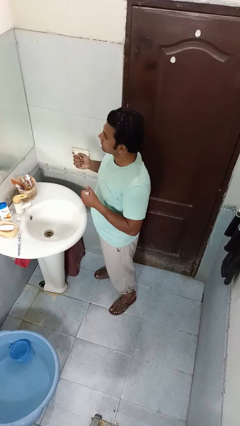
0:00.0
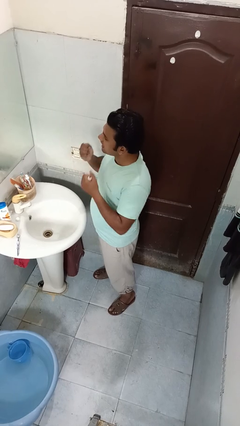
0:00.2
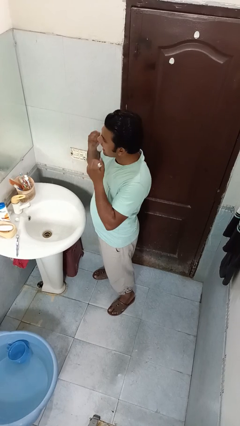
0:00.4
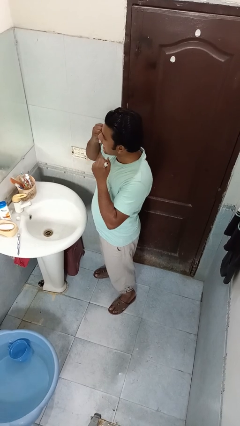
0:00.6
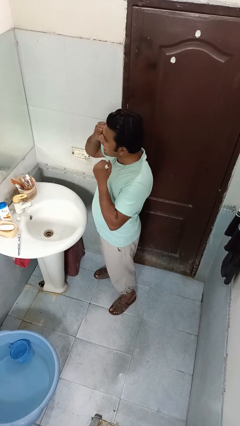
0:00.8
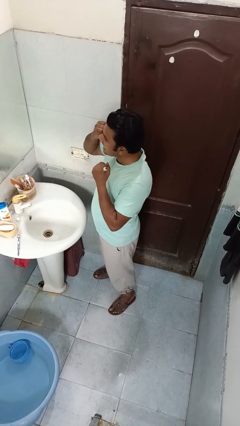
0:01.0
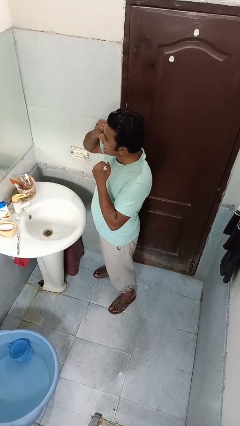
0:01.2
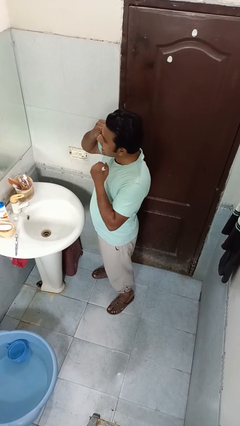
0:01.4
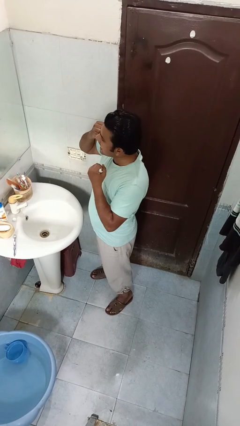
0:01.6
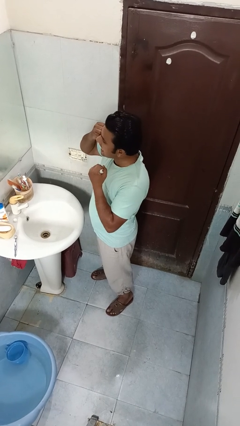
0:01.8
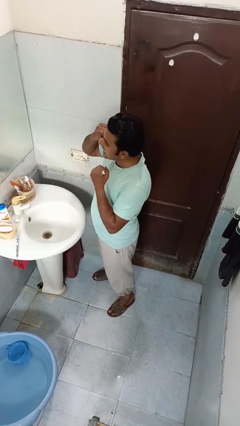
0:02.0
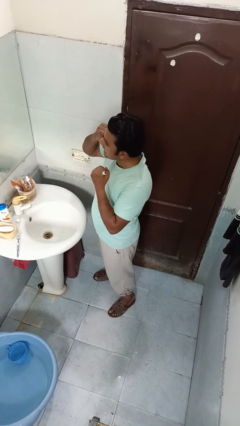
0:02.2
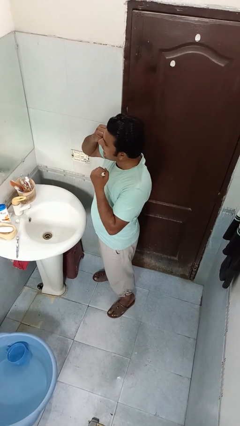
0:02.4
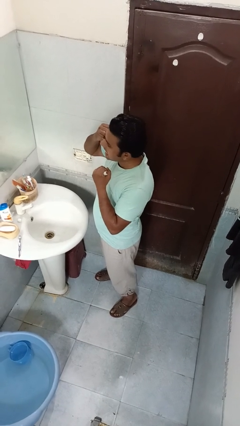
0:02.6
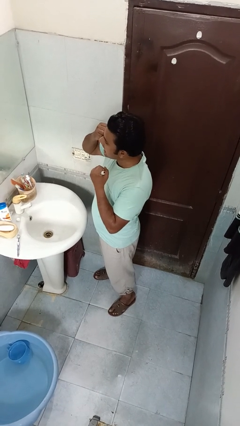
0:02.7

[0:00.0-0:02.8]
person flosses

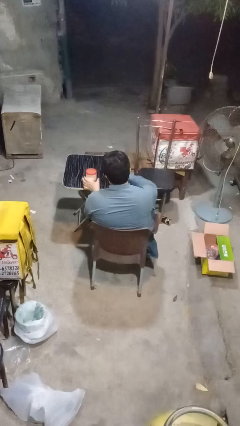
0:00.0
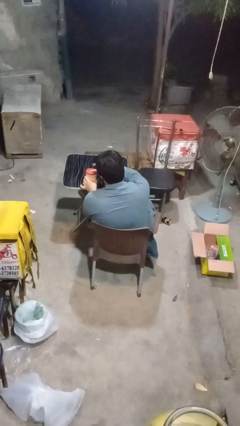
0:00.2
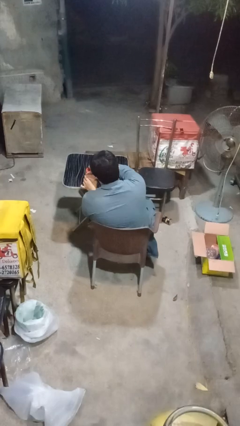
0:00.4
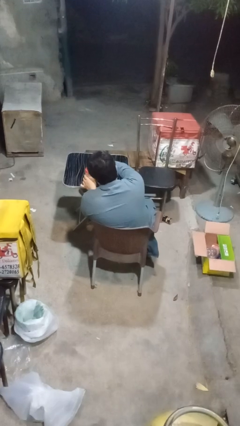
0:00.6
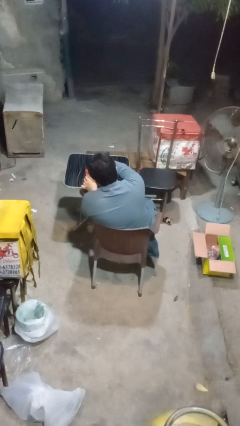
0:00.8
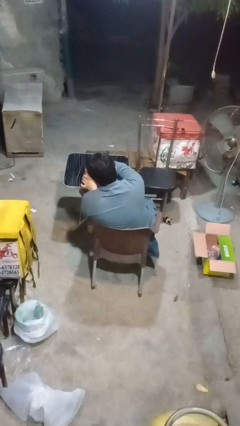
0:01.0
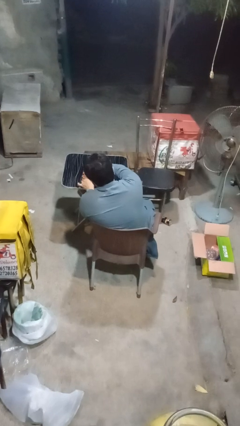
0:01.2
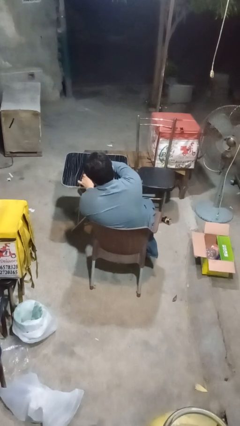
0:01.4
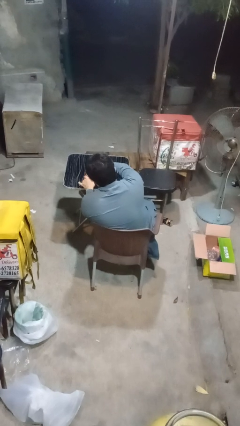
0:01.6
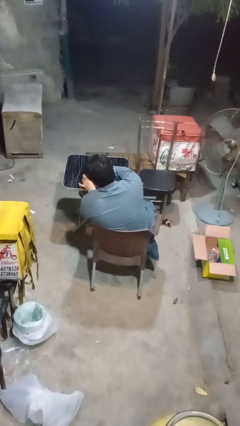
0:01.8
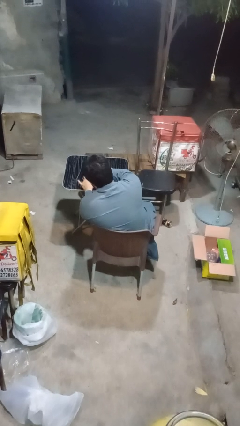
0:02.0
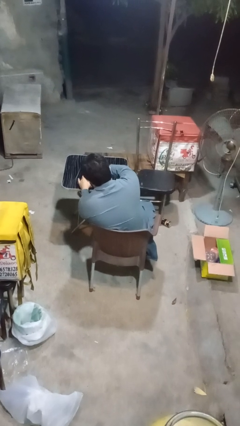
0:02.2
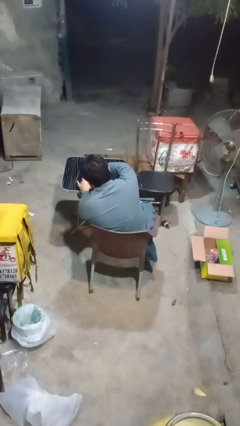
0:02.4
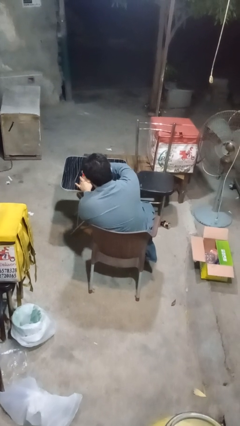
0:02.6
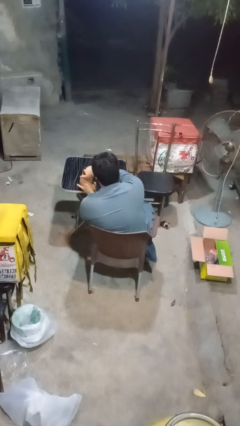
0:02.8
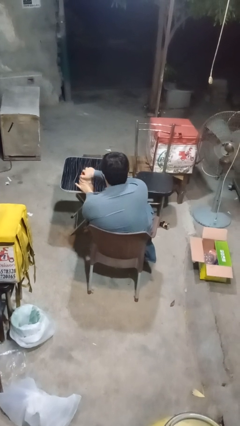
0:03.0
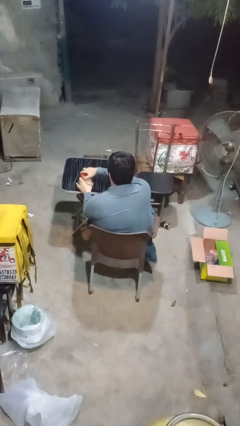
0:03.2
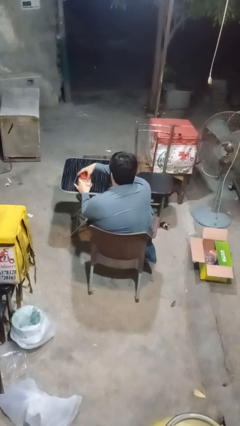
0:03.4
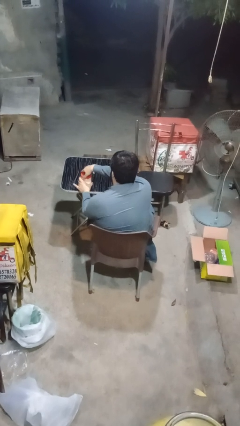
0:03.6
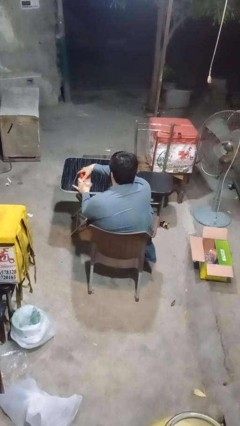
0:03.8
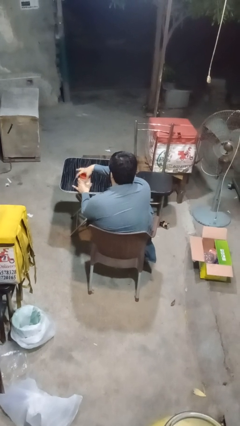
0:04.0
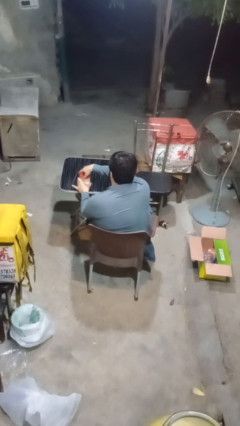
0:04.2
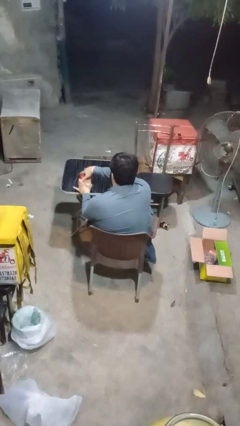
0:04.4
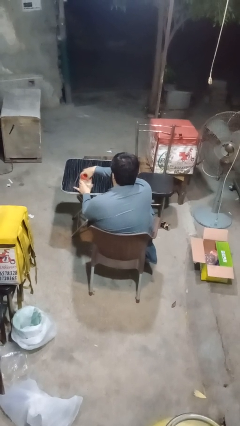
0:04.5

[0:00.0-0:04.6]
person opens jar

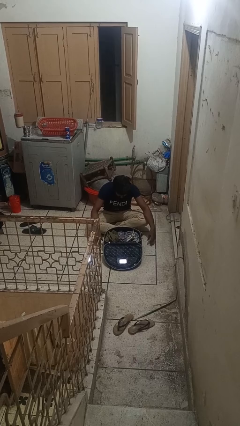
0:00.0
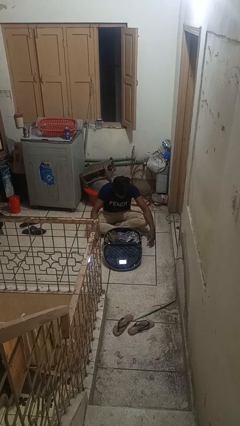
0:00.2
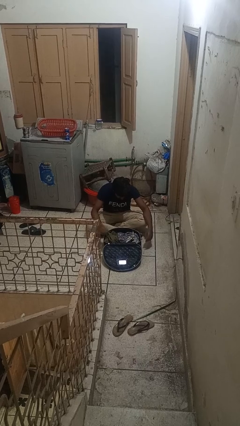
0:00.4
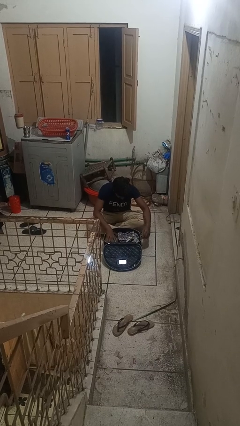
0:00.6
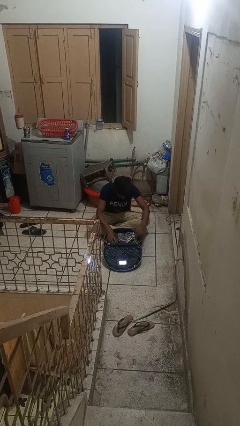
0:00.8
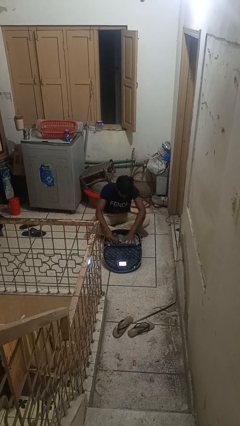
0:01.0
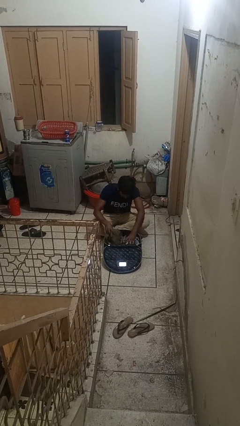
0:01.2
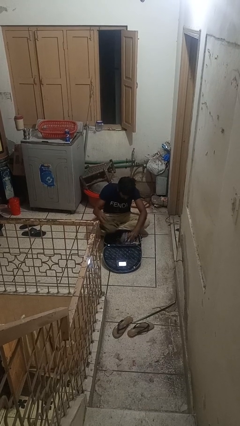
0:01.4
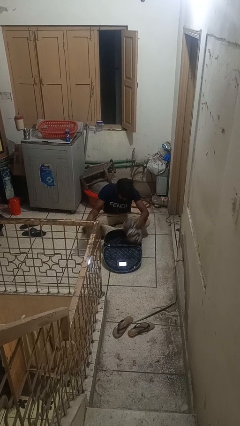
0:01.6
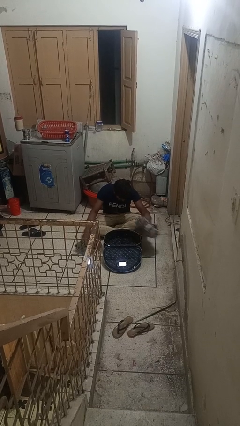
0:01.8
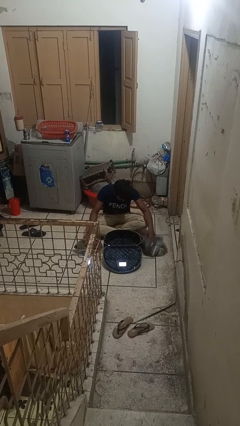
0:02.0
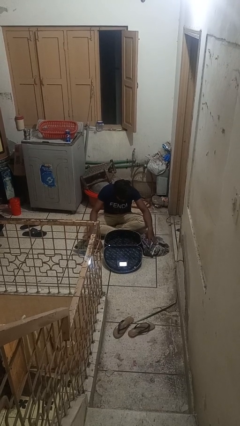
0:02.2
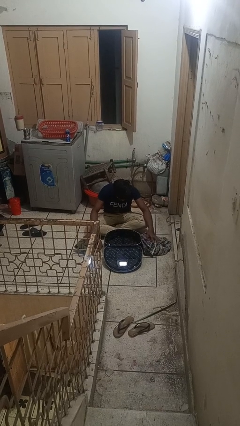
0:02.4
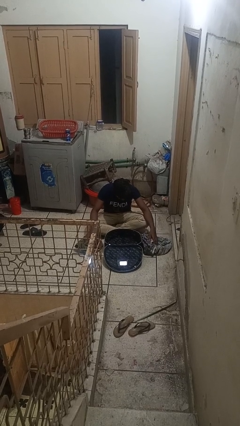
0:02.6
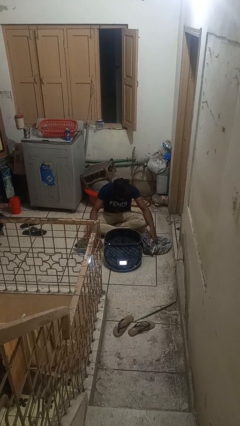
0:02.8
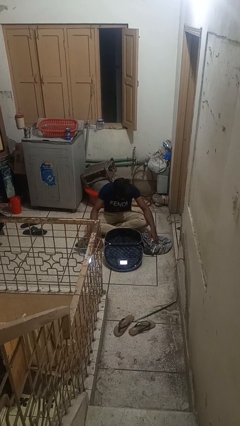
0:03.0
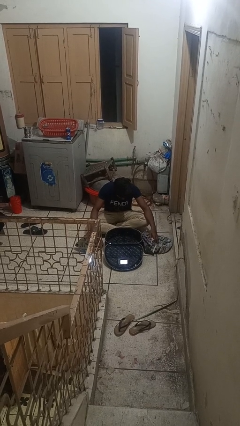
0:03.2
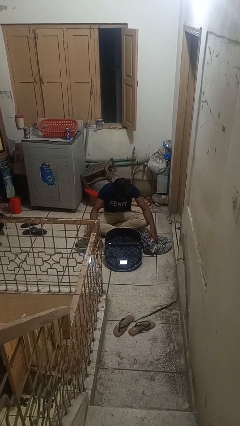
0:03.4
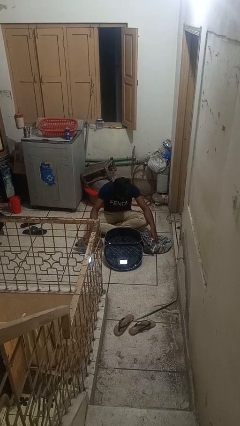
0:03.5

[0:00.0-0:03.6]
person unloads clothes from suitcase

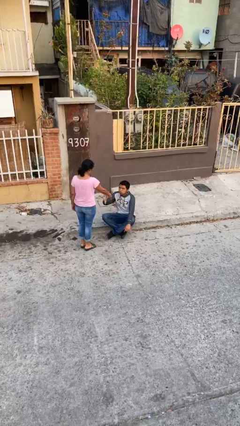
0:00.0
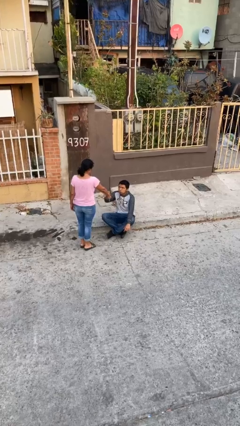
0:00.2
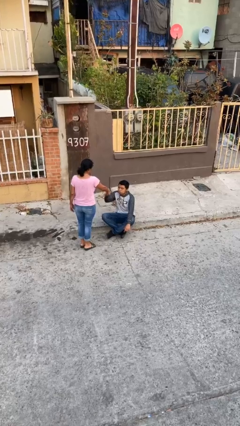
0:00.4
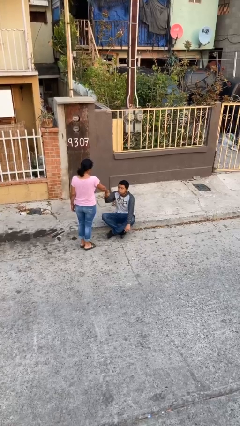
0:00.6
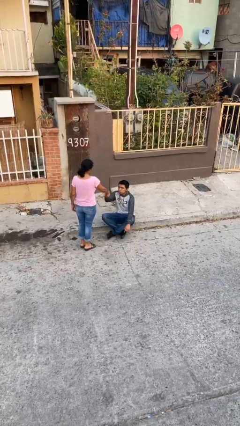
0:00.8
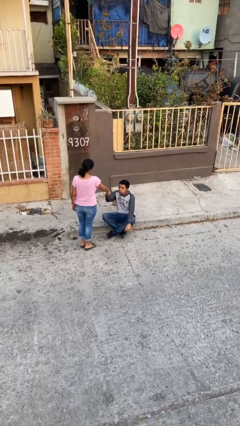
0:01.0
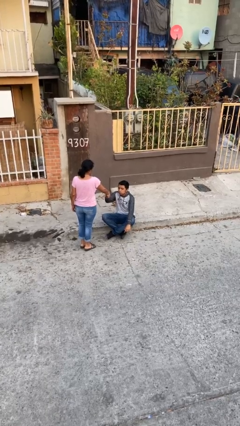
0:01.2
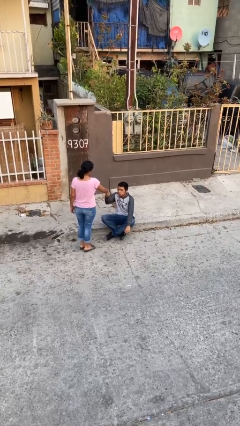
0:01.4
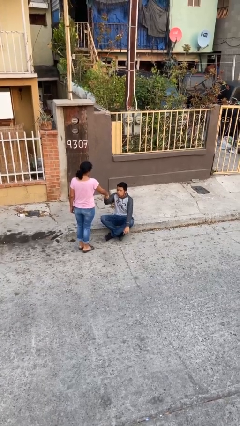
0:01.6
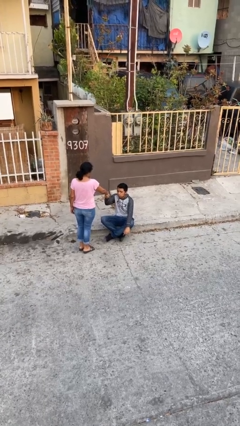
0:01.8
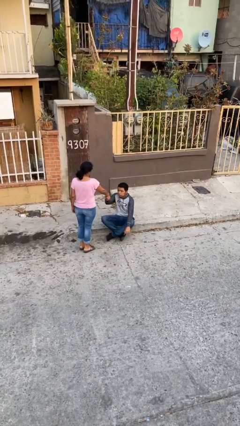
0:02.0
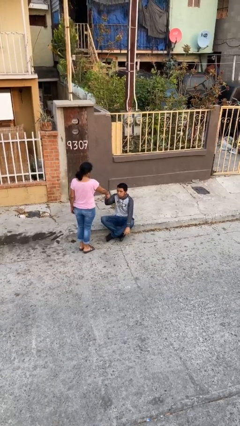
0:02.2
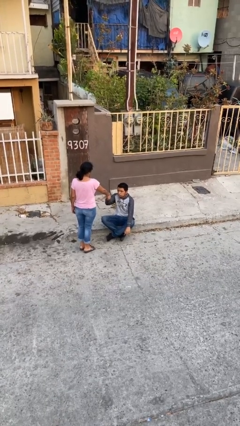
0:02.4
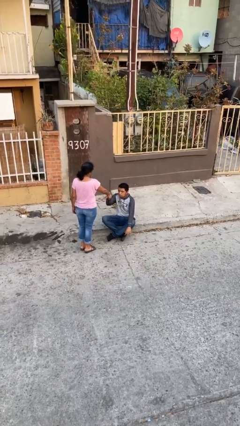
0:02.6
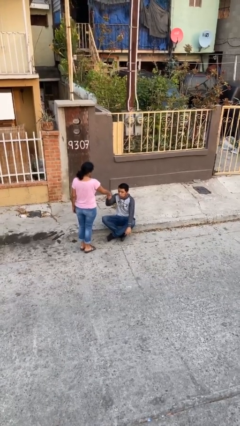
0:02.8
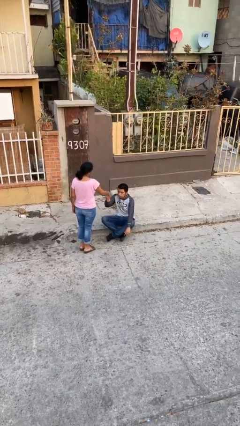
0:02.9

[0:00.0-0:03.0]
person shakes hand

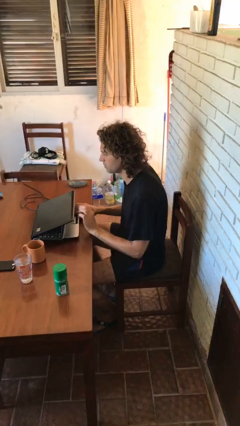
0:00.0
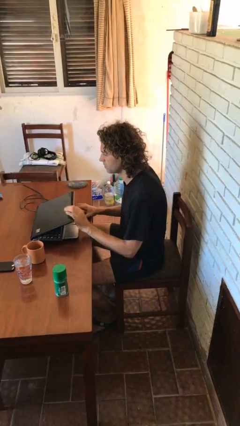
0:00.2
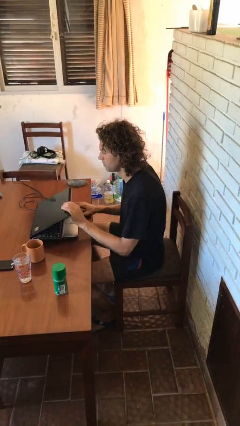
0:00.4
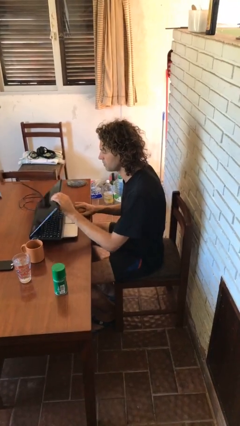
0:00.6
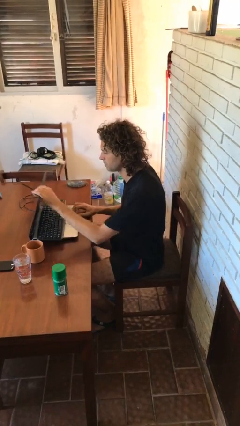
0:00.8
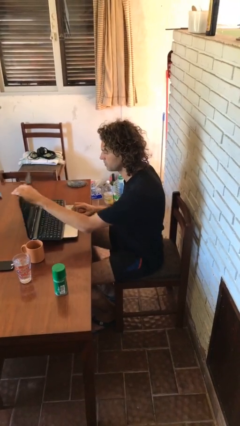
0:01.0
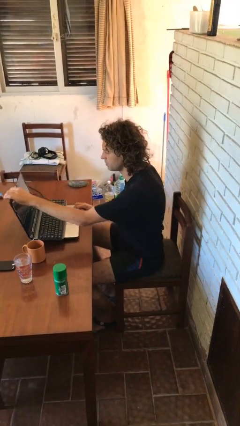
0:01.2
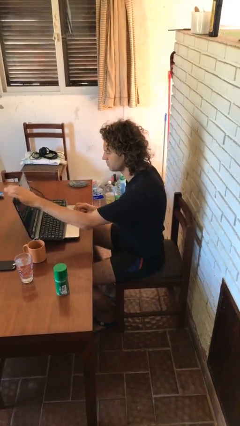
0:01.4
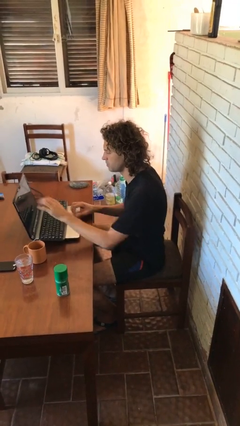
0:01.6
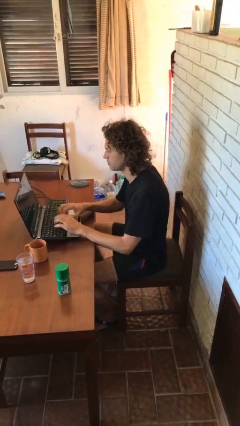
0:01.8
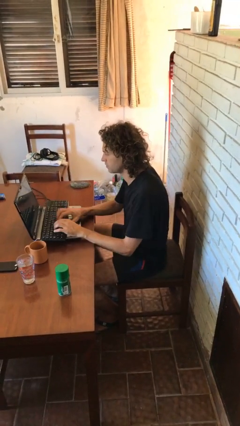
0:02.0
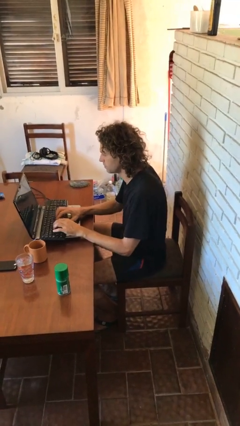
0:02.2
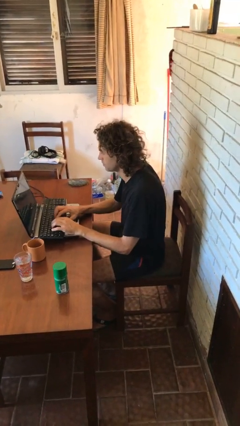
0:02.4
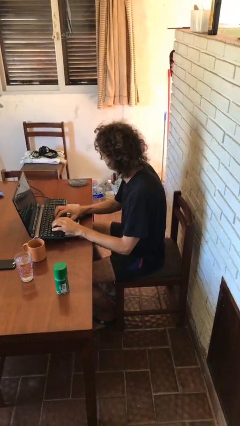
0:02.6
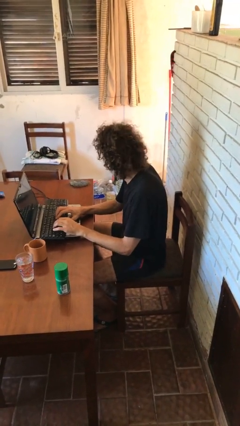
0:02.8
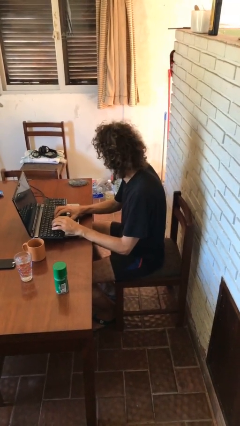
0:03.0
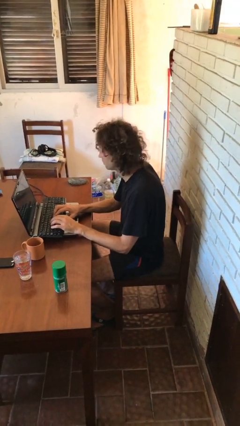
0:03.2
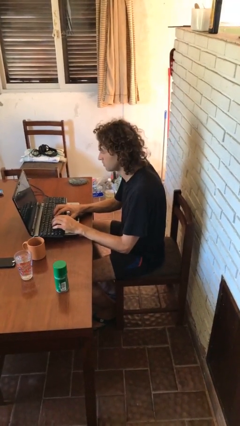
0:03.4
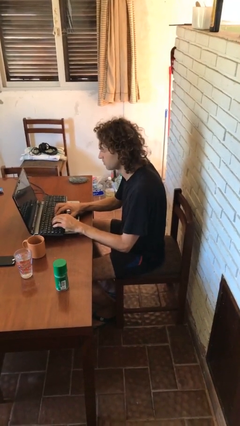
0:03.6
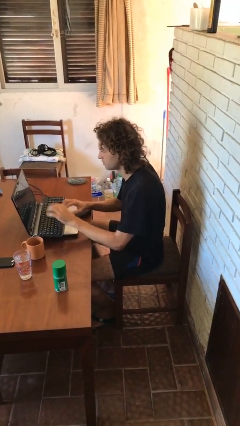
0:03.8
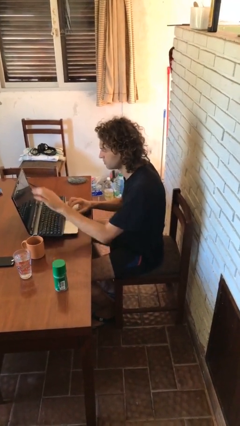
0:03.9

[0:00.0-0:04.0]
person interacts with laptop
